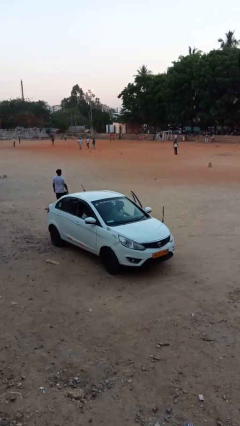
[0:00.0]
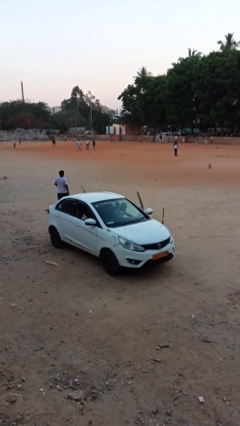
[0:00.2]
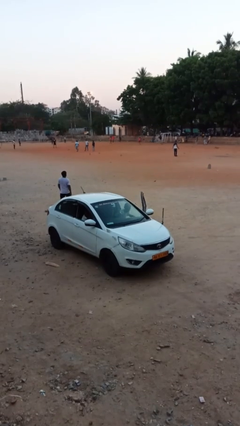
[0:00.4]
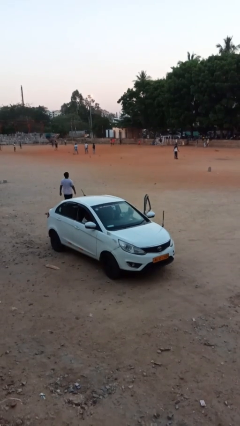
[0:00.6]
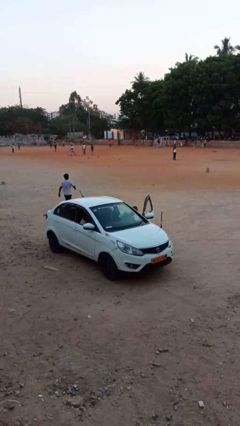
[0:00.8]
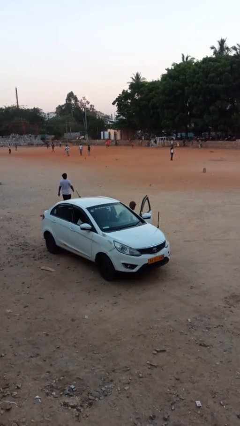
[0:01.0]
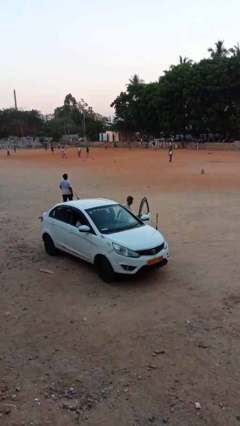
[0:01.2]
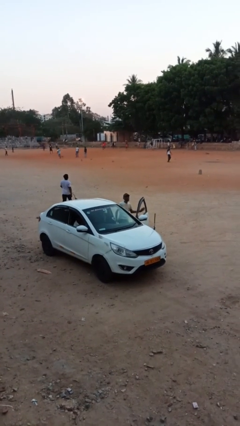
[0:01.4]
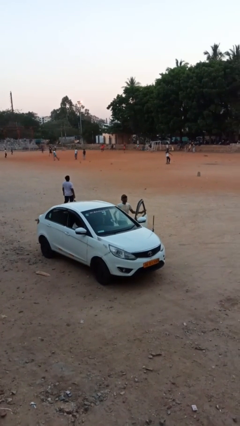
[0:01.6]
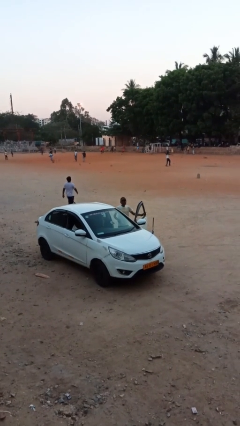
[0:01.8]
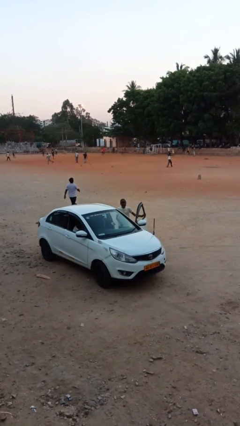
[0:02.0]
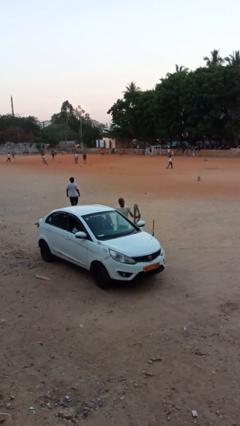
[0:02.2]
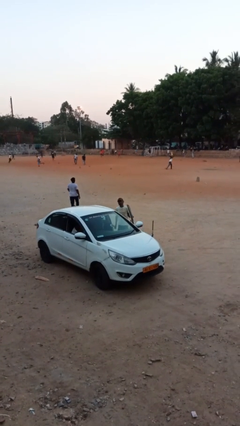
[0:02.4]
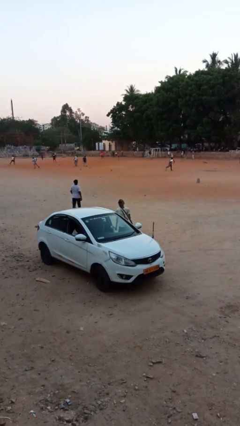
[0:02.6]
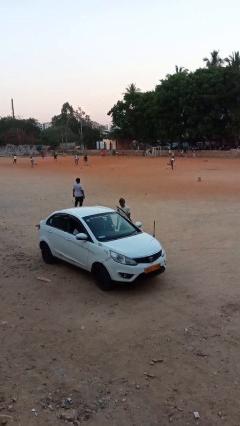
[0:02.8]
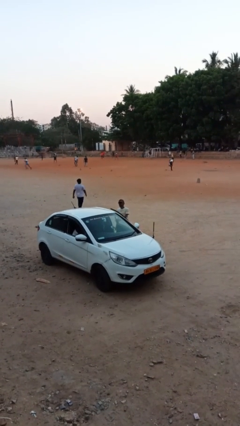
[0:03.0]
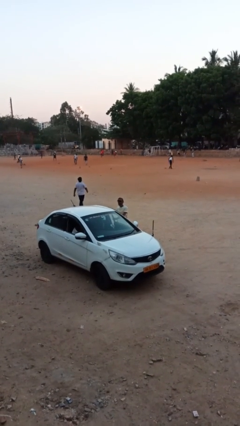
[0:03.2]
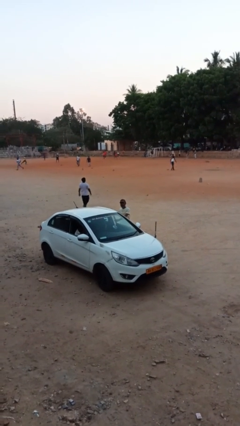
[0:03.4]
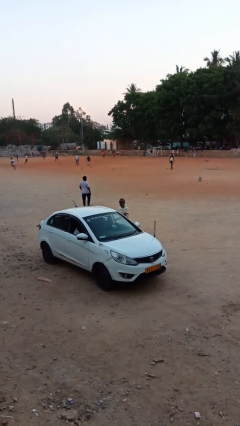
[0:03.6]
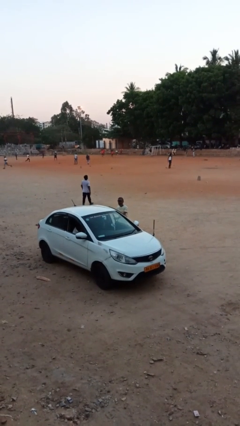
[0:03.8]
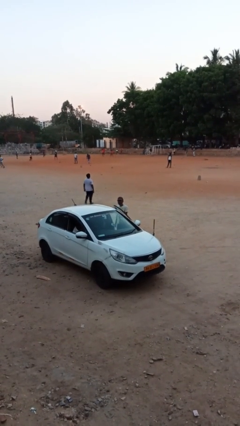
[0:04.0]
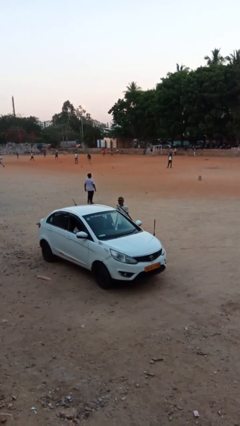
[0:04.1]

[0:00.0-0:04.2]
person exits car

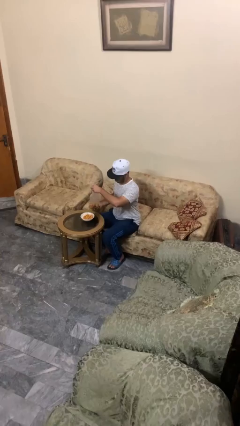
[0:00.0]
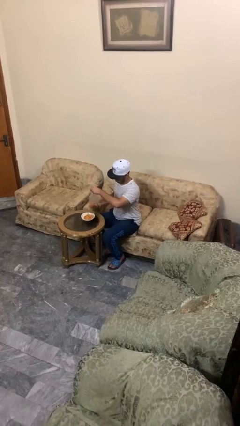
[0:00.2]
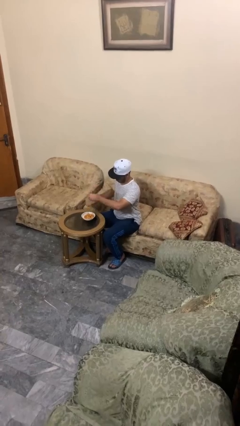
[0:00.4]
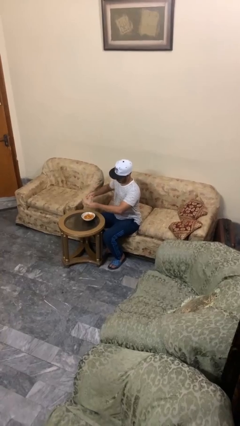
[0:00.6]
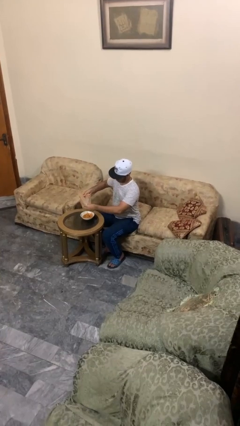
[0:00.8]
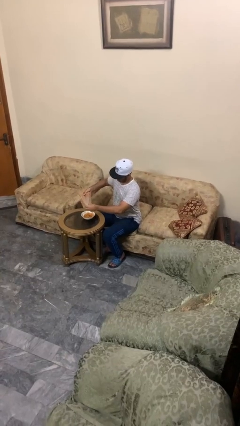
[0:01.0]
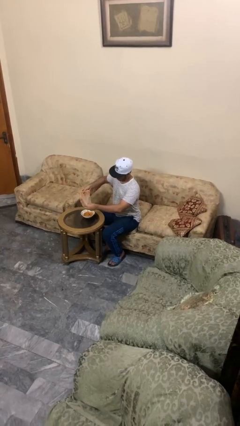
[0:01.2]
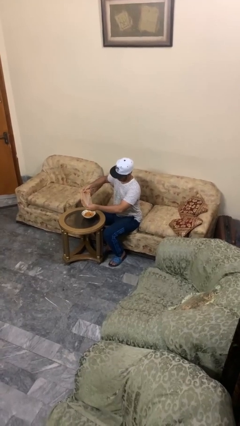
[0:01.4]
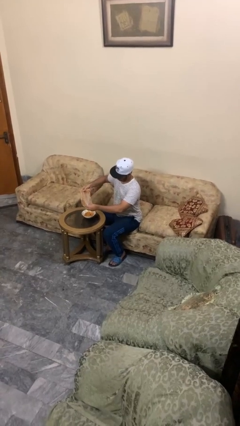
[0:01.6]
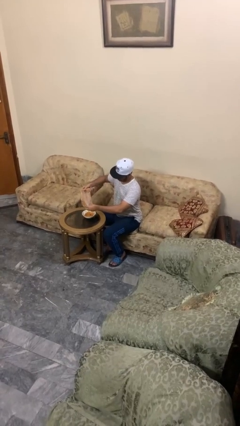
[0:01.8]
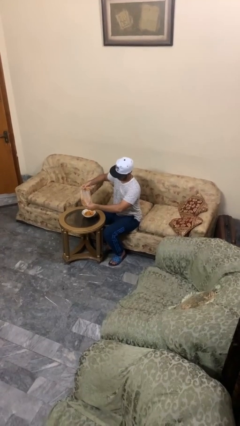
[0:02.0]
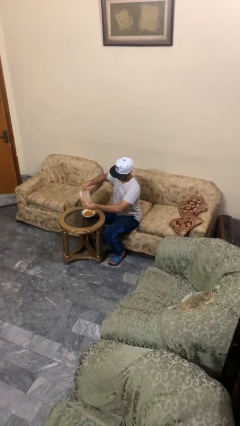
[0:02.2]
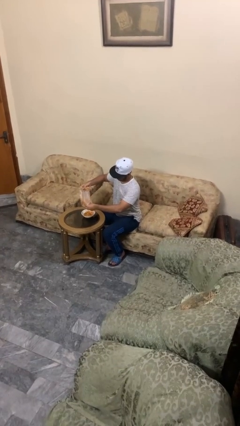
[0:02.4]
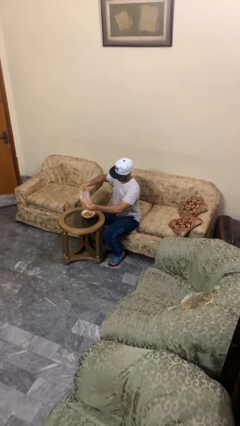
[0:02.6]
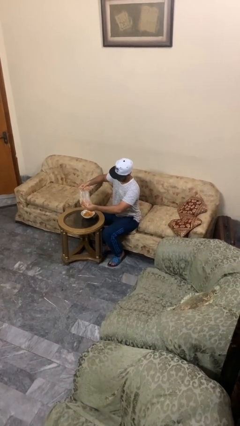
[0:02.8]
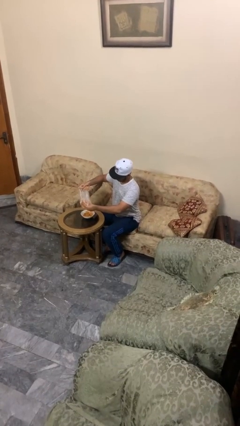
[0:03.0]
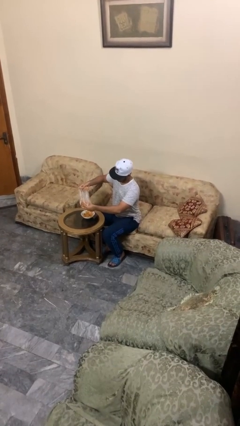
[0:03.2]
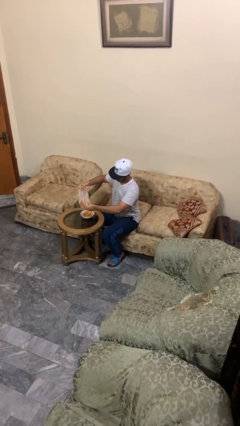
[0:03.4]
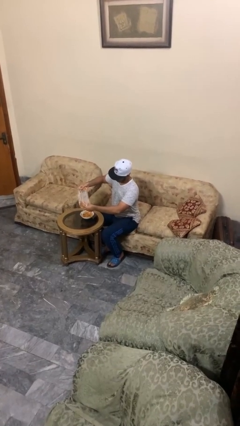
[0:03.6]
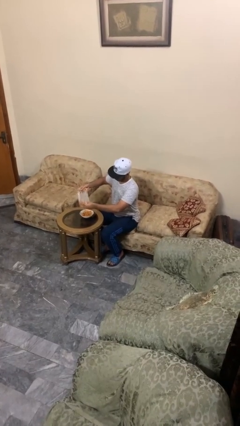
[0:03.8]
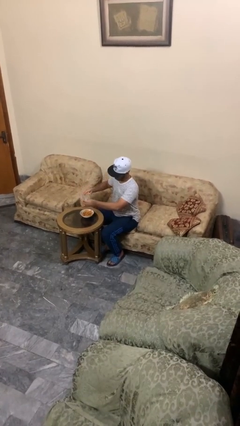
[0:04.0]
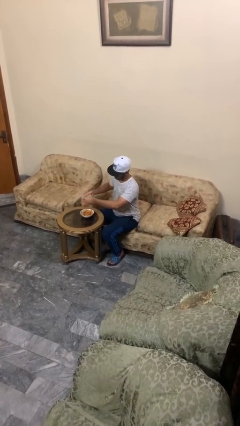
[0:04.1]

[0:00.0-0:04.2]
person pours into bowl

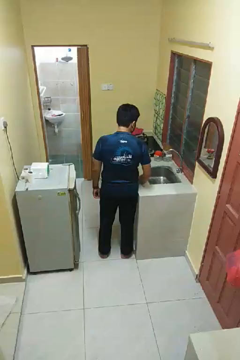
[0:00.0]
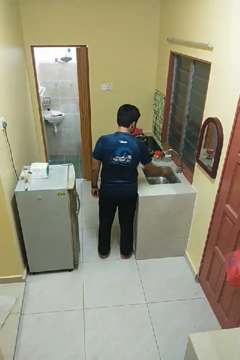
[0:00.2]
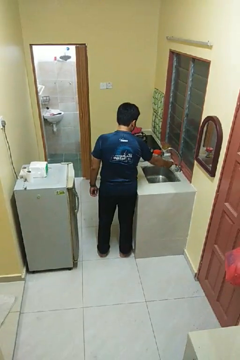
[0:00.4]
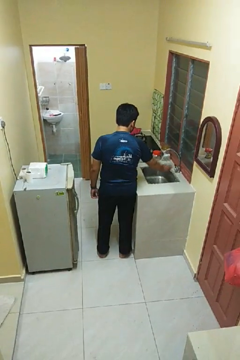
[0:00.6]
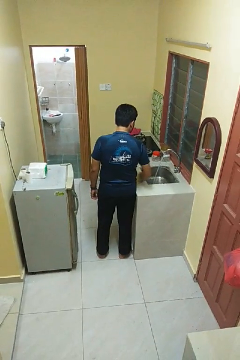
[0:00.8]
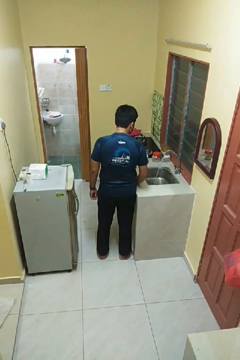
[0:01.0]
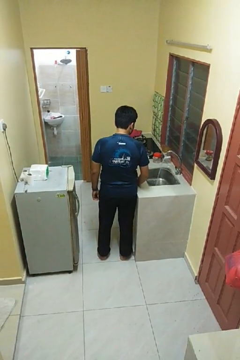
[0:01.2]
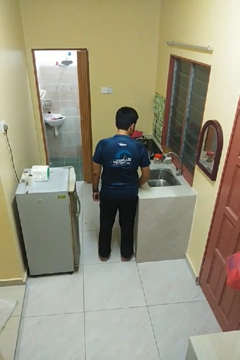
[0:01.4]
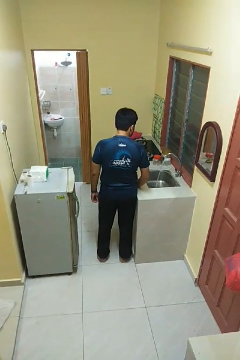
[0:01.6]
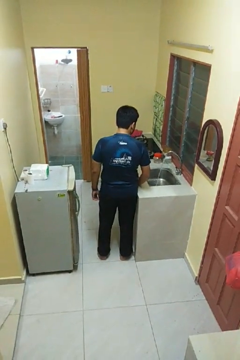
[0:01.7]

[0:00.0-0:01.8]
person turns on faucet

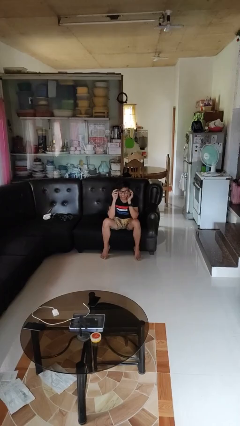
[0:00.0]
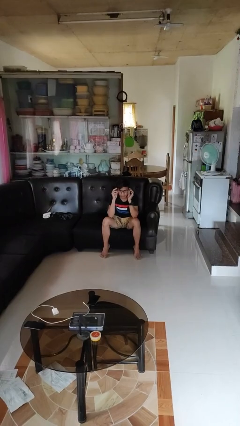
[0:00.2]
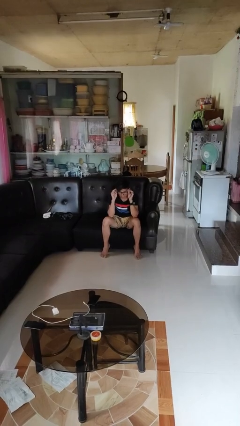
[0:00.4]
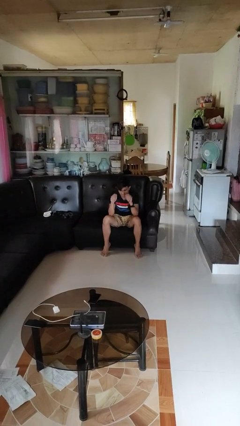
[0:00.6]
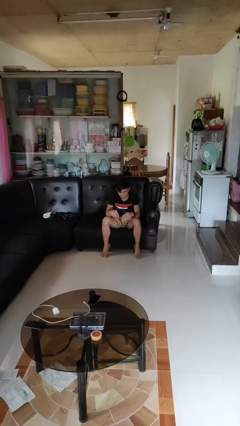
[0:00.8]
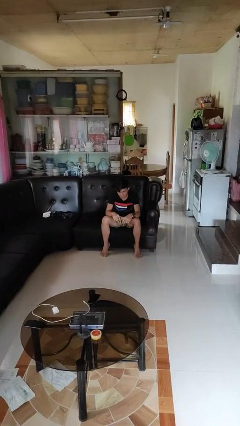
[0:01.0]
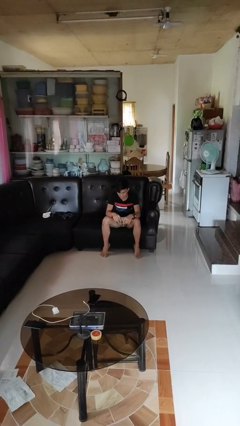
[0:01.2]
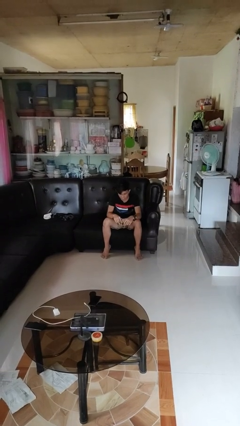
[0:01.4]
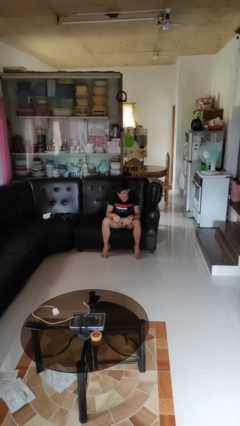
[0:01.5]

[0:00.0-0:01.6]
person takes off glasses

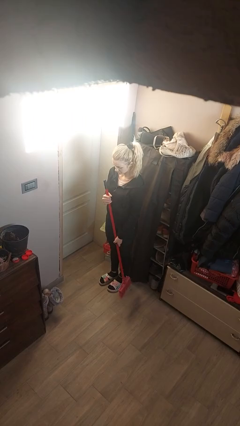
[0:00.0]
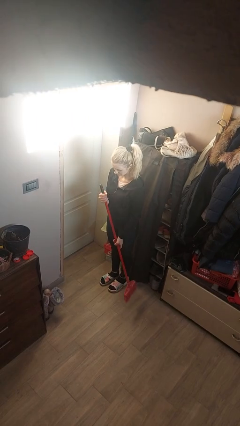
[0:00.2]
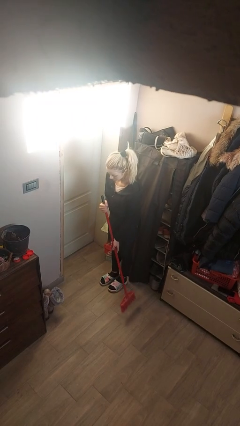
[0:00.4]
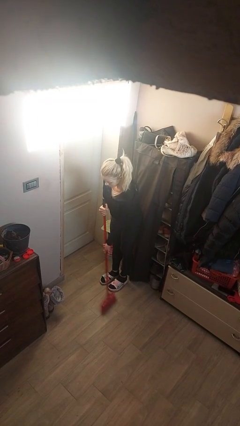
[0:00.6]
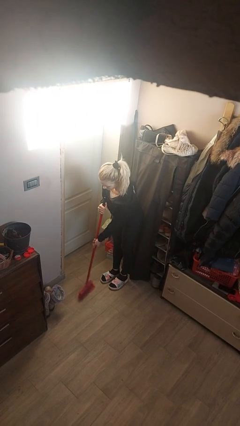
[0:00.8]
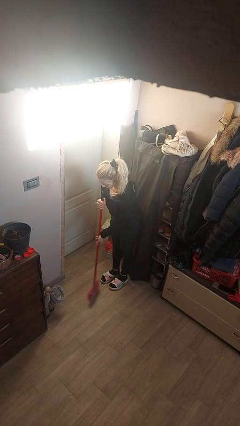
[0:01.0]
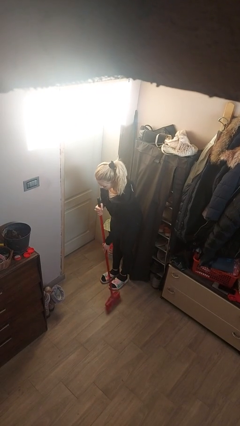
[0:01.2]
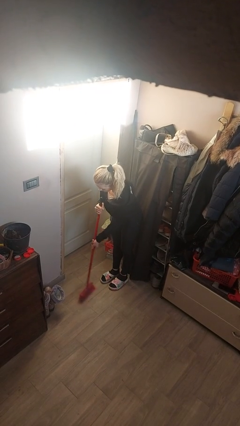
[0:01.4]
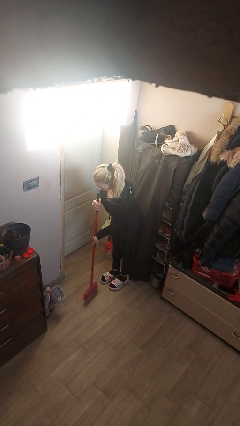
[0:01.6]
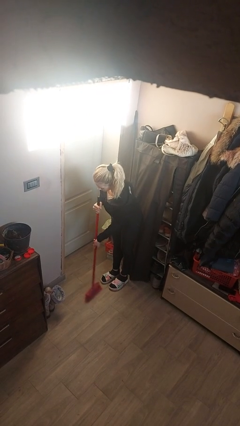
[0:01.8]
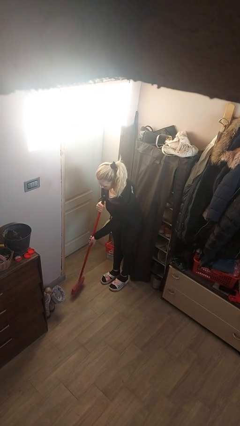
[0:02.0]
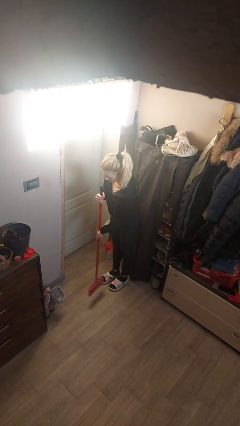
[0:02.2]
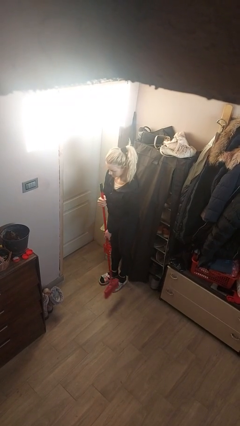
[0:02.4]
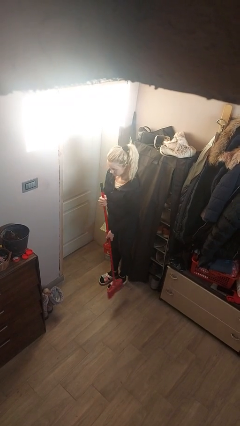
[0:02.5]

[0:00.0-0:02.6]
person sweeps floor

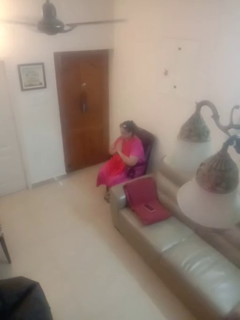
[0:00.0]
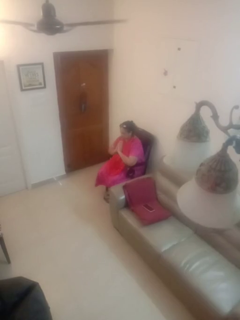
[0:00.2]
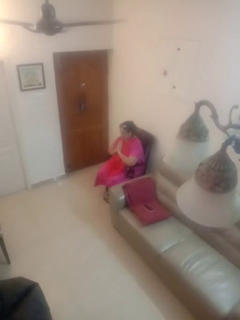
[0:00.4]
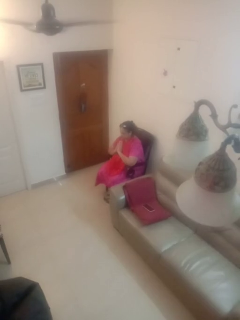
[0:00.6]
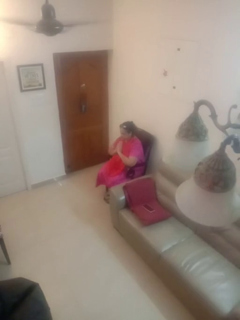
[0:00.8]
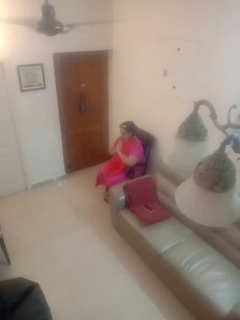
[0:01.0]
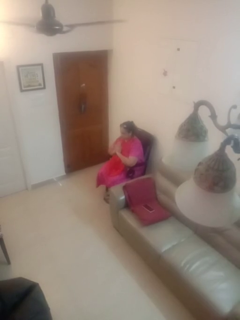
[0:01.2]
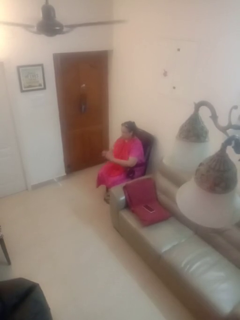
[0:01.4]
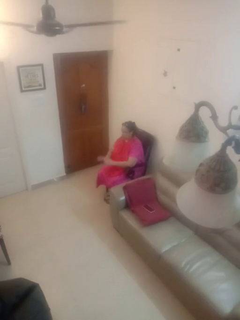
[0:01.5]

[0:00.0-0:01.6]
person prays

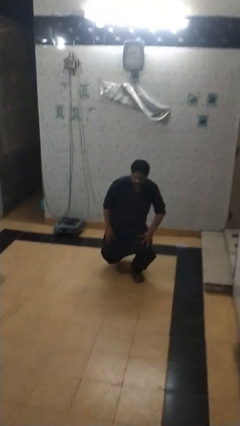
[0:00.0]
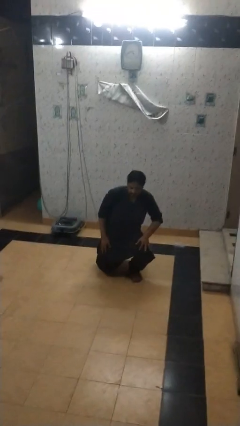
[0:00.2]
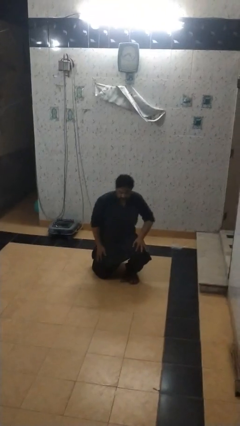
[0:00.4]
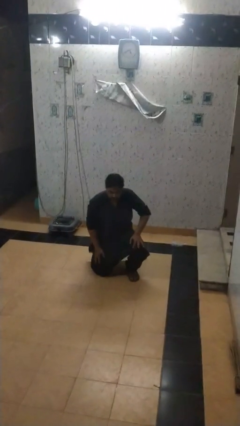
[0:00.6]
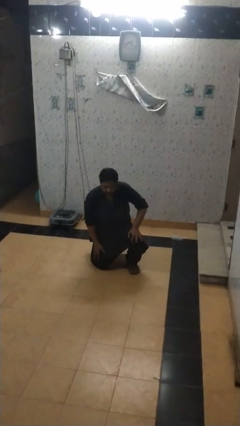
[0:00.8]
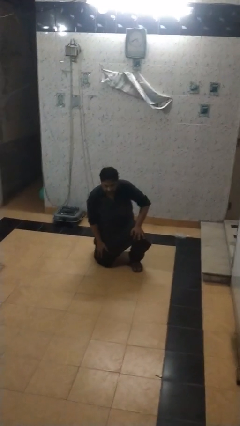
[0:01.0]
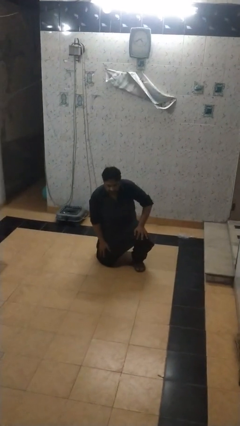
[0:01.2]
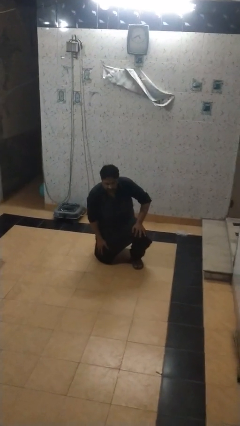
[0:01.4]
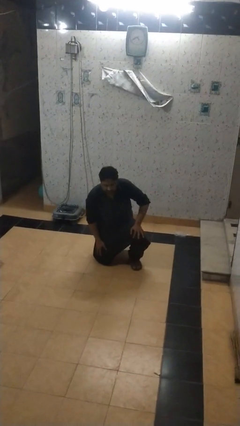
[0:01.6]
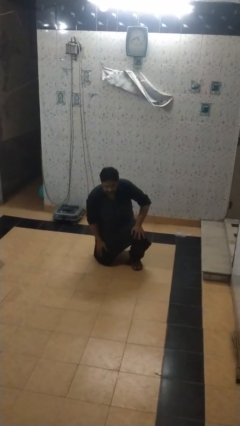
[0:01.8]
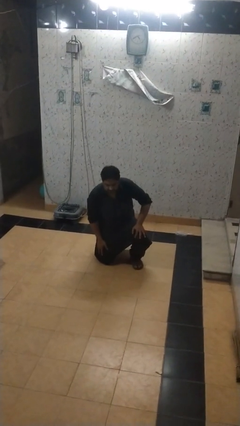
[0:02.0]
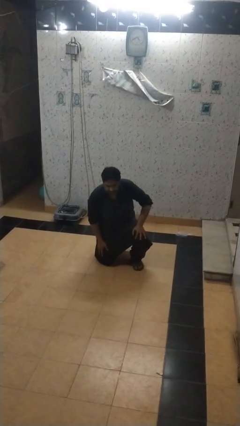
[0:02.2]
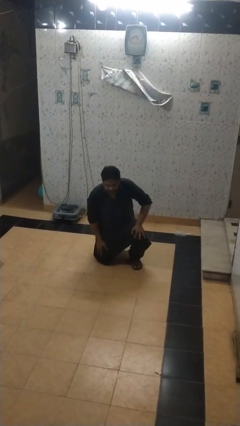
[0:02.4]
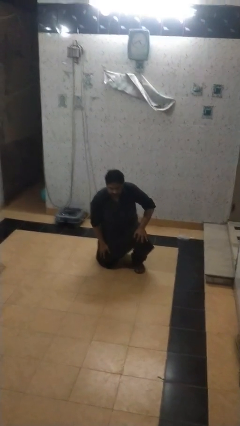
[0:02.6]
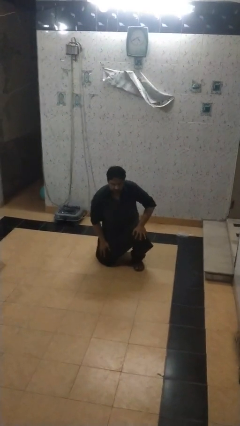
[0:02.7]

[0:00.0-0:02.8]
person kneels
